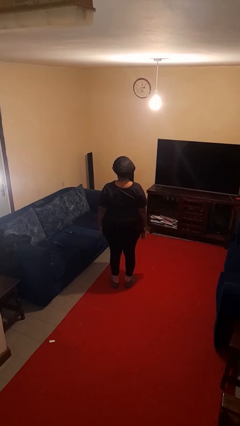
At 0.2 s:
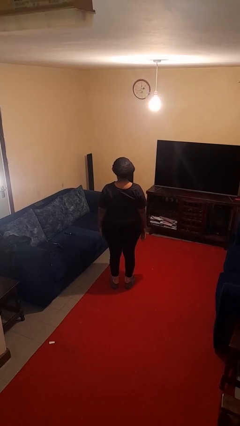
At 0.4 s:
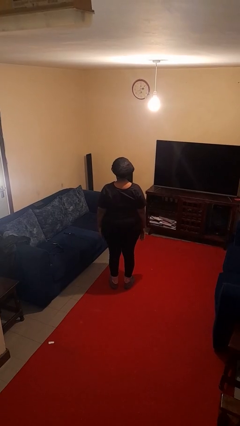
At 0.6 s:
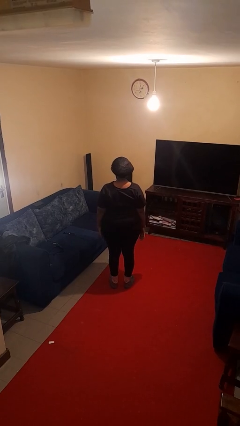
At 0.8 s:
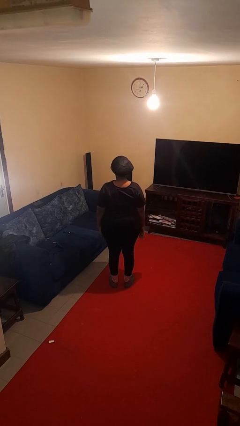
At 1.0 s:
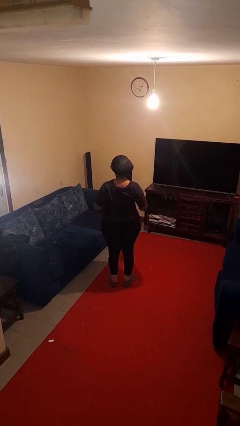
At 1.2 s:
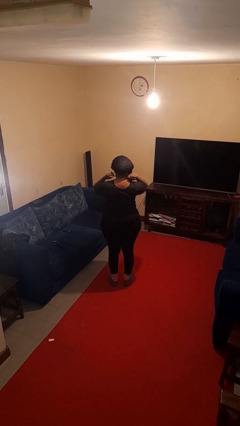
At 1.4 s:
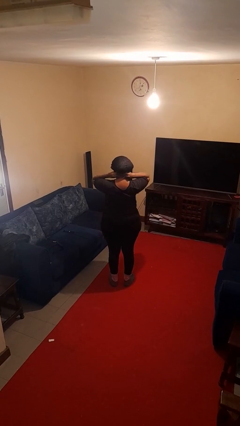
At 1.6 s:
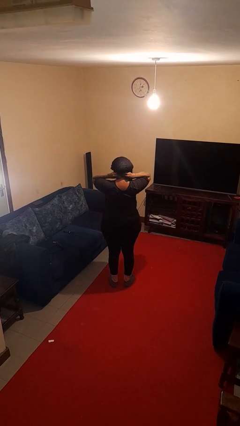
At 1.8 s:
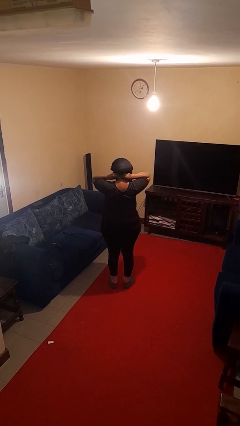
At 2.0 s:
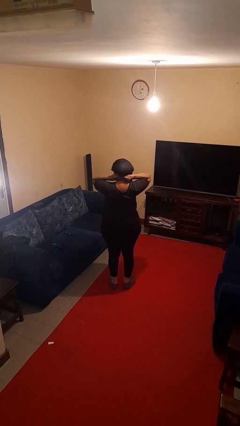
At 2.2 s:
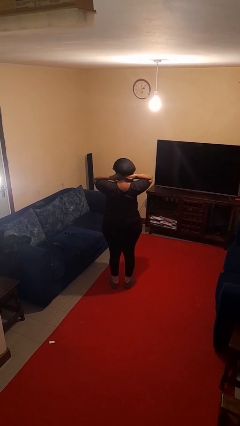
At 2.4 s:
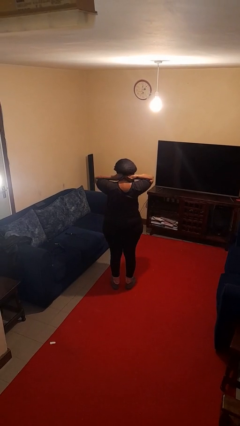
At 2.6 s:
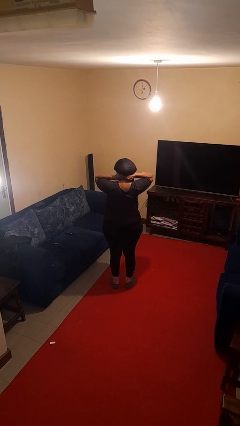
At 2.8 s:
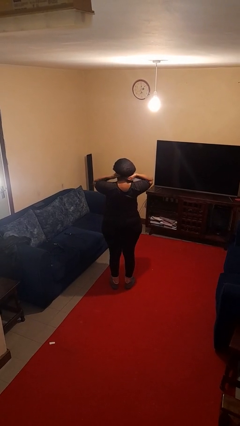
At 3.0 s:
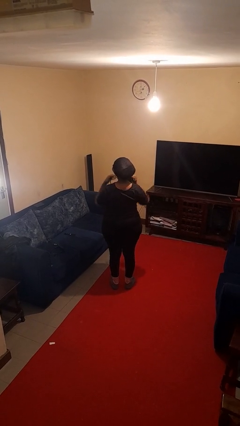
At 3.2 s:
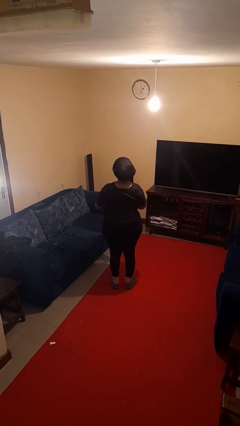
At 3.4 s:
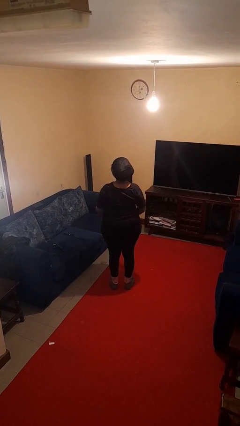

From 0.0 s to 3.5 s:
person takes off necklace

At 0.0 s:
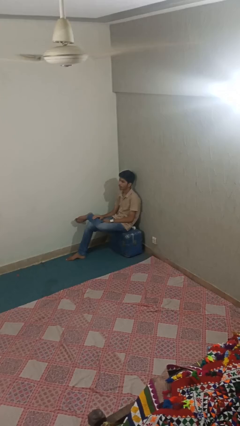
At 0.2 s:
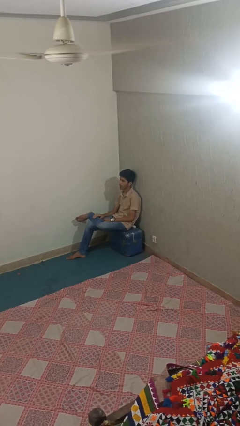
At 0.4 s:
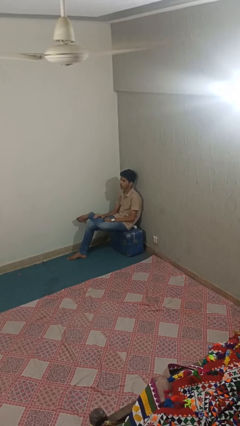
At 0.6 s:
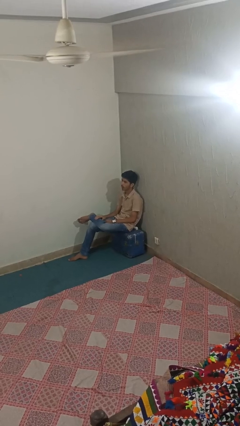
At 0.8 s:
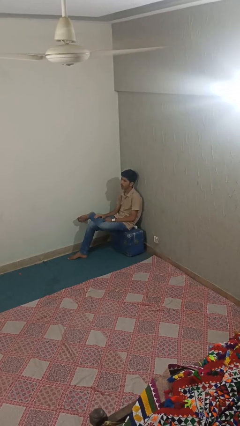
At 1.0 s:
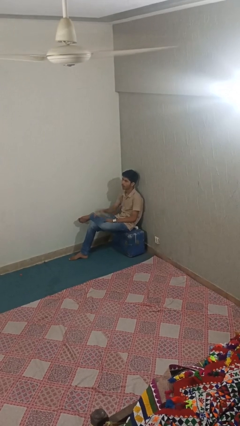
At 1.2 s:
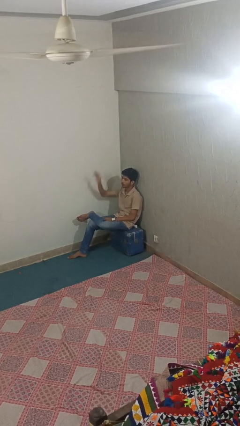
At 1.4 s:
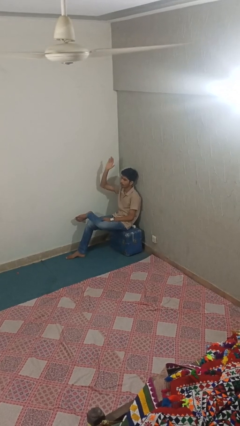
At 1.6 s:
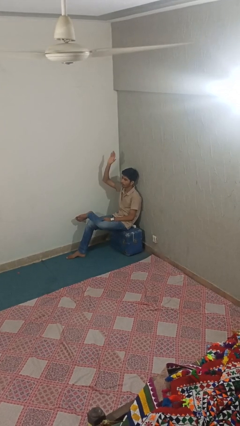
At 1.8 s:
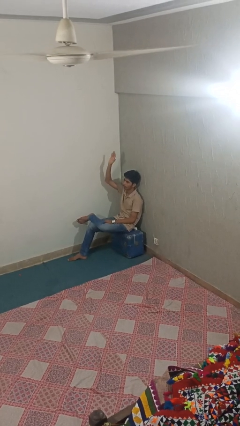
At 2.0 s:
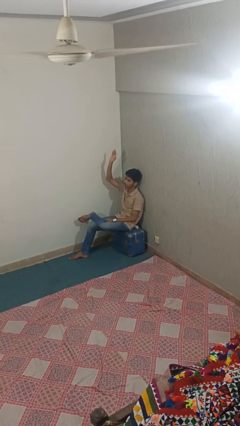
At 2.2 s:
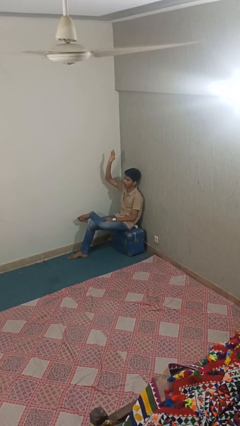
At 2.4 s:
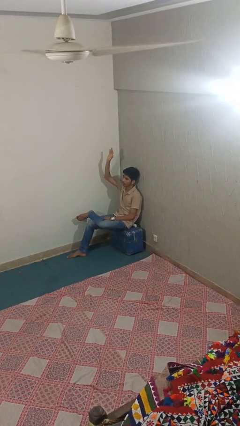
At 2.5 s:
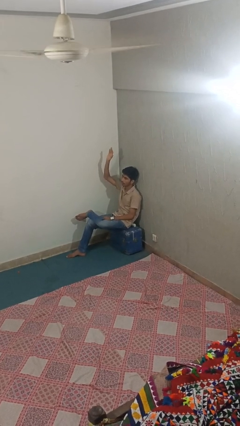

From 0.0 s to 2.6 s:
person gestures raise hand

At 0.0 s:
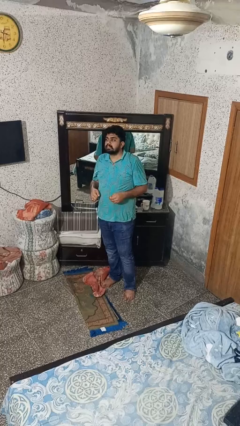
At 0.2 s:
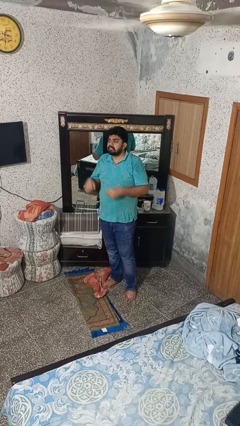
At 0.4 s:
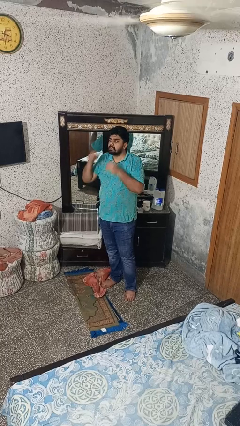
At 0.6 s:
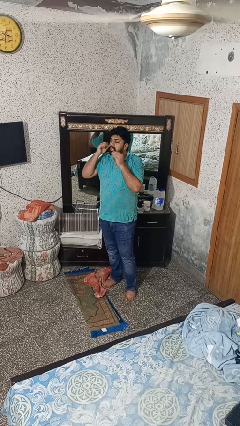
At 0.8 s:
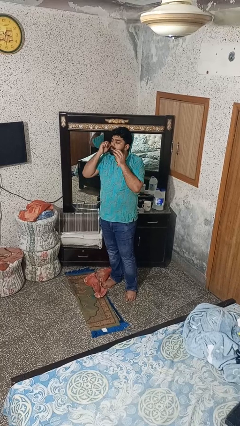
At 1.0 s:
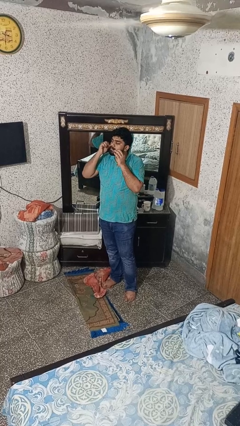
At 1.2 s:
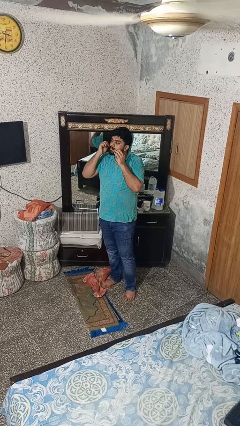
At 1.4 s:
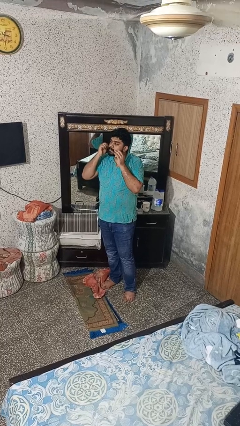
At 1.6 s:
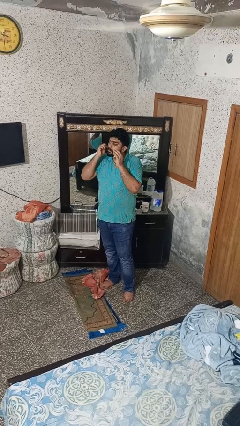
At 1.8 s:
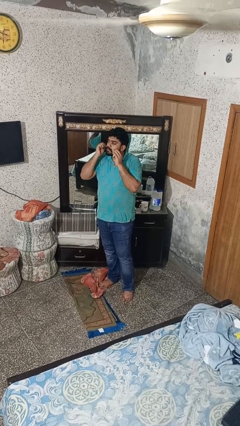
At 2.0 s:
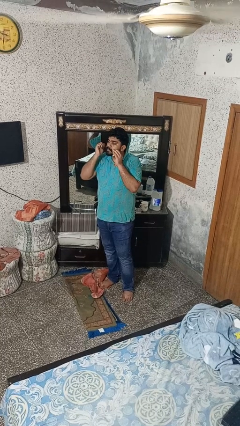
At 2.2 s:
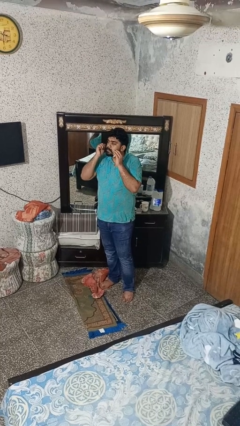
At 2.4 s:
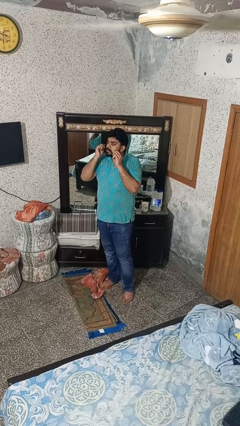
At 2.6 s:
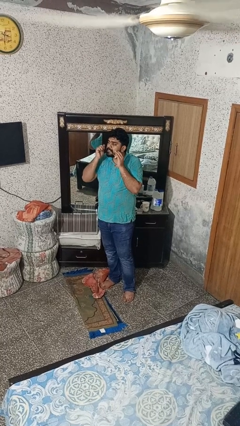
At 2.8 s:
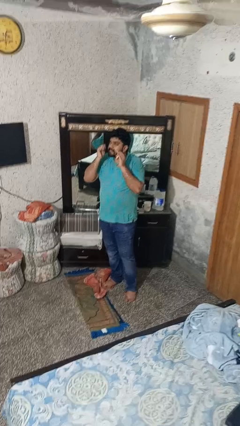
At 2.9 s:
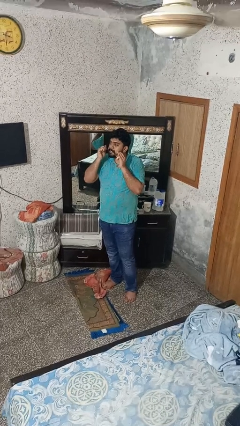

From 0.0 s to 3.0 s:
person flosses

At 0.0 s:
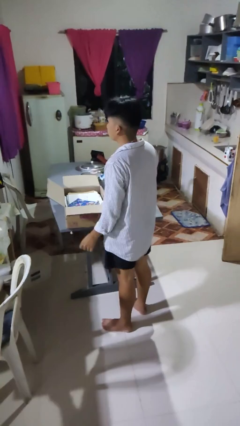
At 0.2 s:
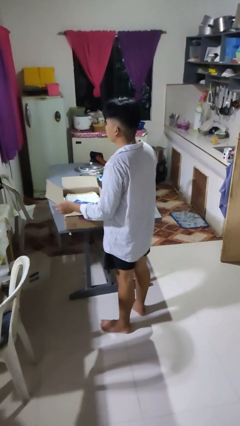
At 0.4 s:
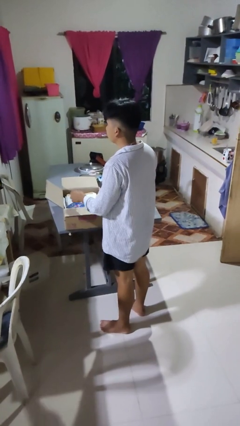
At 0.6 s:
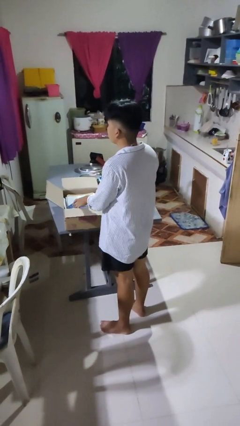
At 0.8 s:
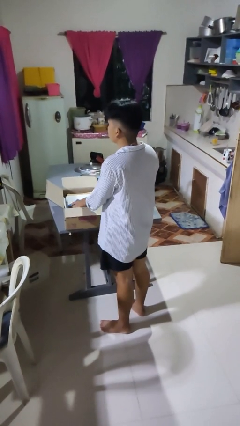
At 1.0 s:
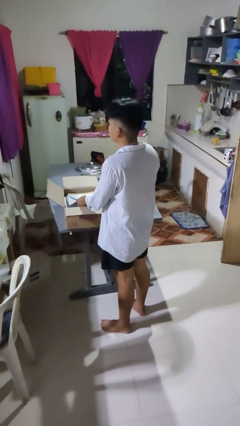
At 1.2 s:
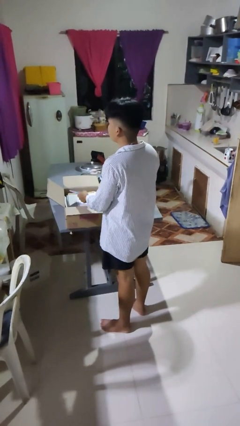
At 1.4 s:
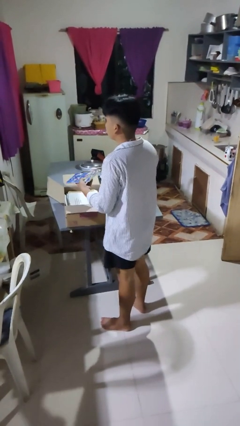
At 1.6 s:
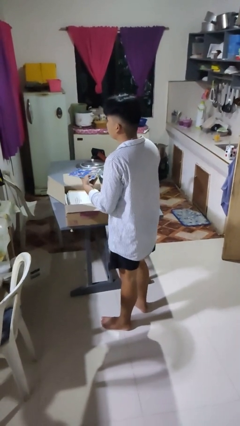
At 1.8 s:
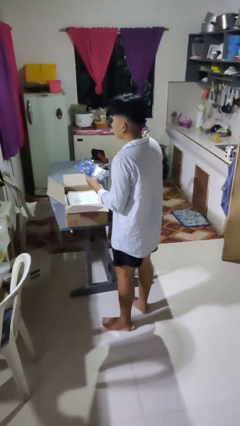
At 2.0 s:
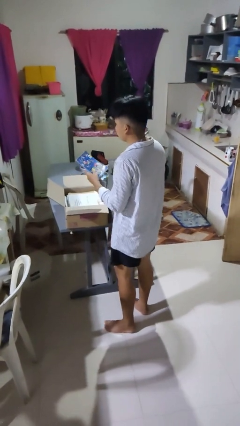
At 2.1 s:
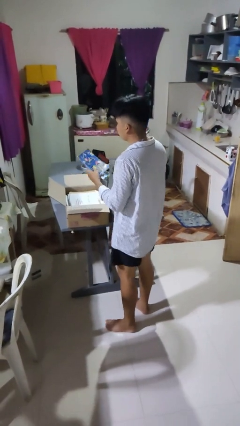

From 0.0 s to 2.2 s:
person takes object from box

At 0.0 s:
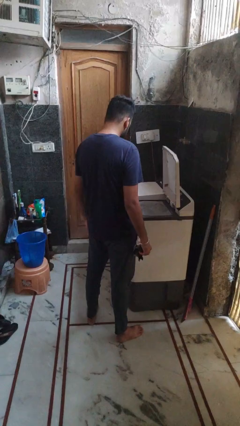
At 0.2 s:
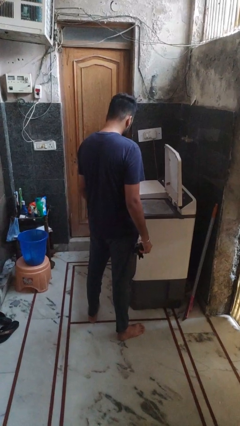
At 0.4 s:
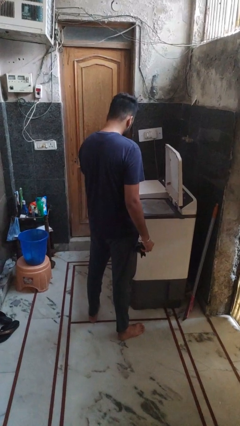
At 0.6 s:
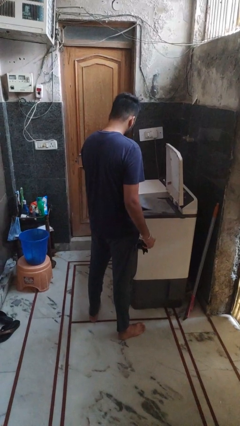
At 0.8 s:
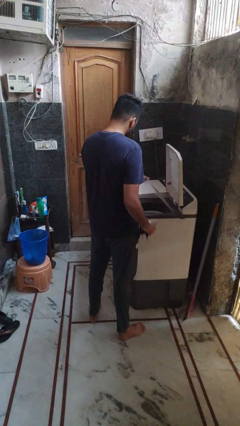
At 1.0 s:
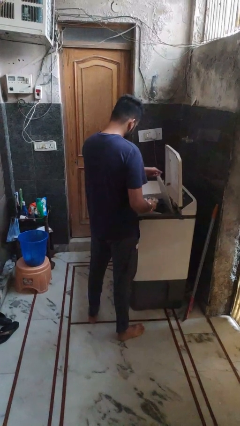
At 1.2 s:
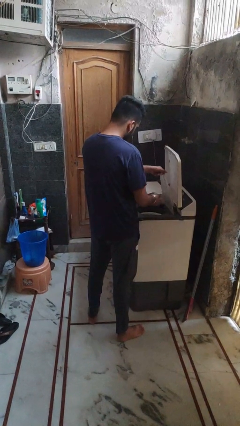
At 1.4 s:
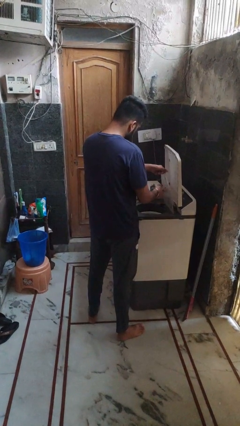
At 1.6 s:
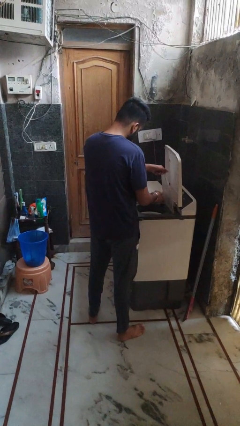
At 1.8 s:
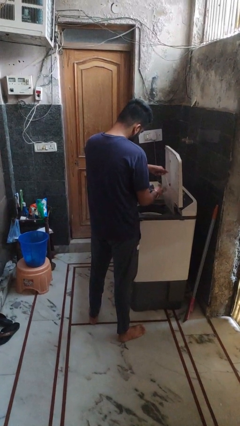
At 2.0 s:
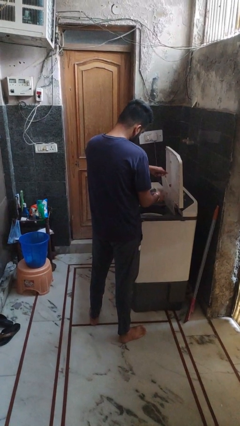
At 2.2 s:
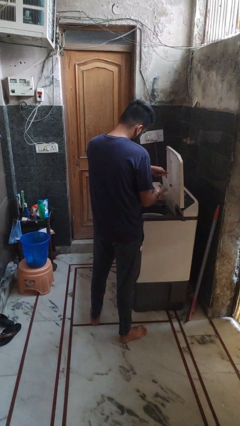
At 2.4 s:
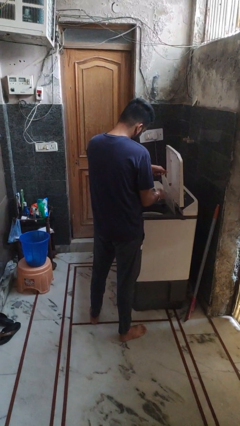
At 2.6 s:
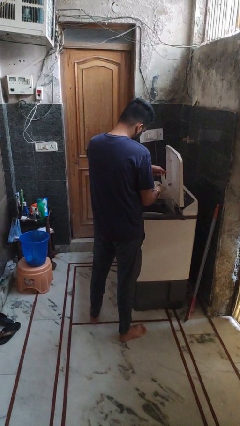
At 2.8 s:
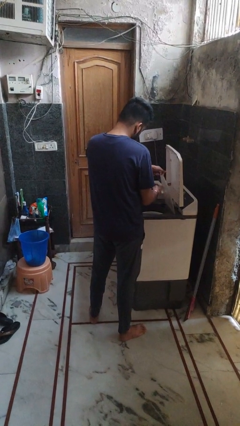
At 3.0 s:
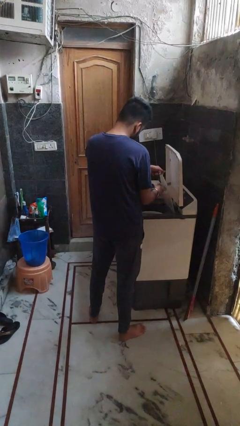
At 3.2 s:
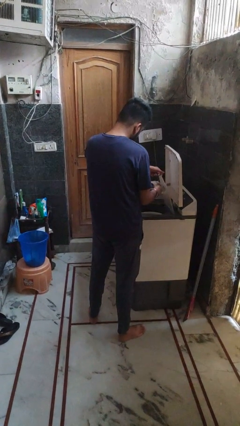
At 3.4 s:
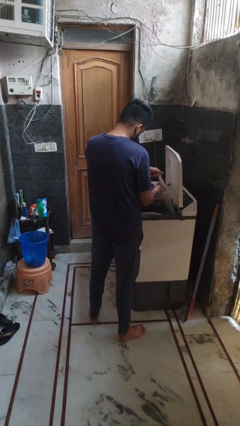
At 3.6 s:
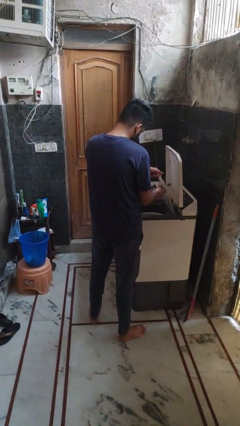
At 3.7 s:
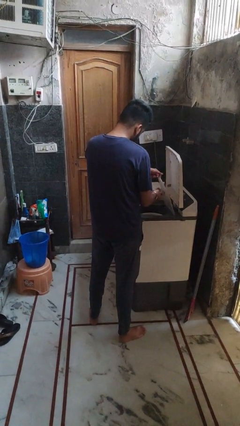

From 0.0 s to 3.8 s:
person cleans dryer lint trap

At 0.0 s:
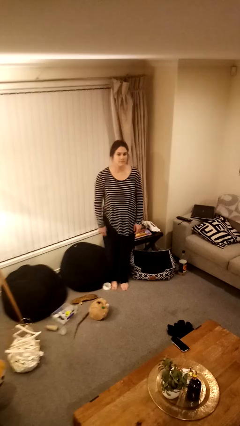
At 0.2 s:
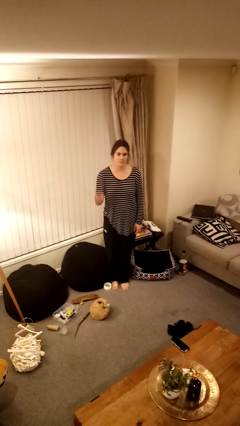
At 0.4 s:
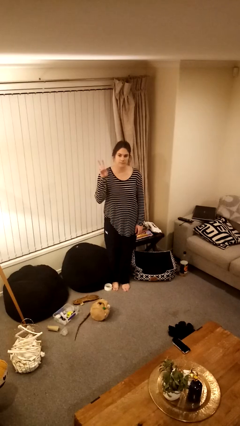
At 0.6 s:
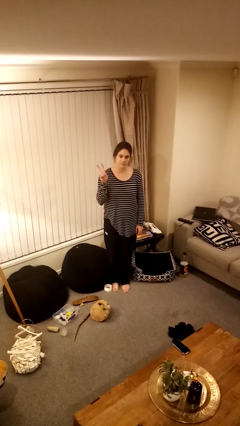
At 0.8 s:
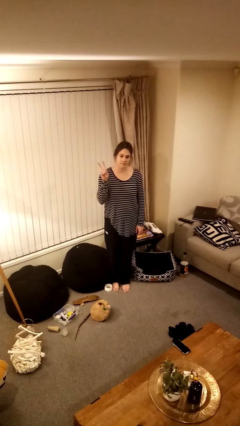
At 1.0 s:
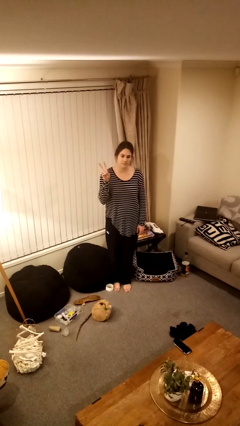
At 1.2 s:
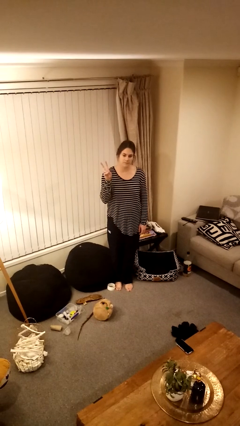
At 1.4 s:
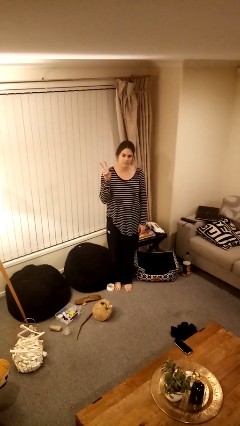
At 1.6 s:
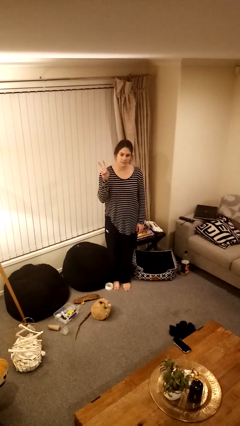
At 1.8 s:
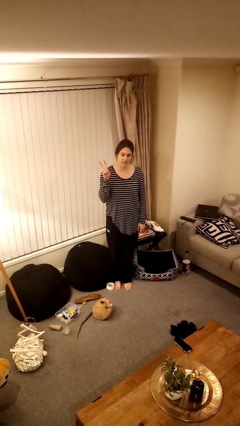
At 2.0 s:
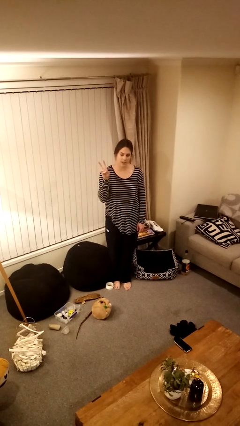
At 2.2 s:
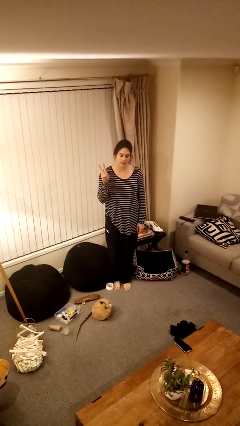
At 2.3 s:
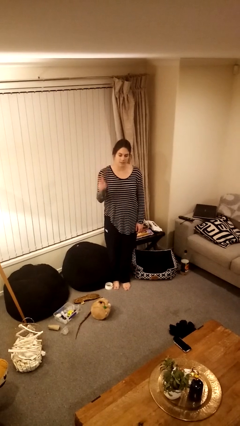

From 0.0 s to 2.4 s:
person gestures peace
